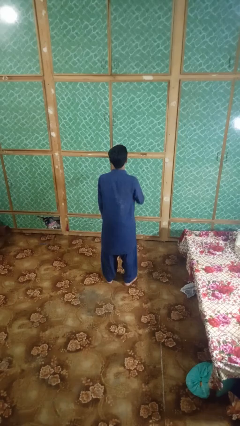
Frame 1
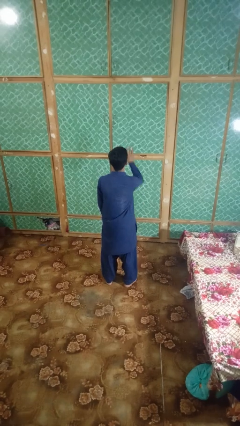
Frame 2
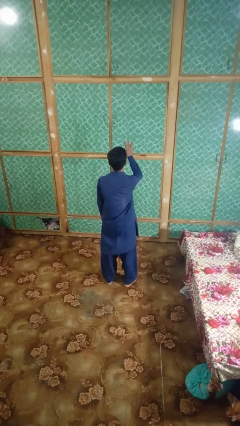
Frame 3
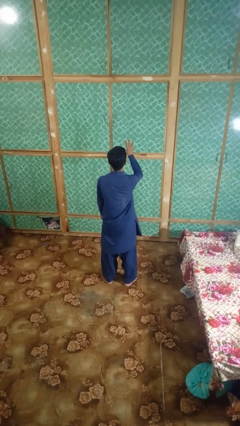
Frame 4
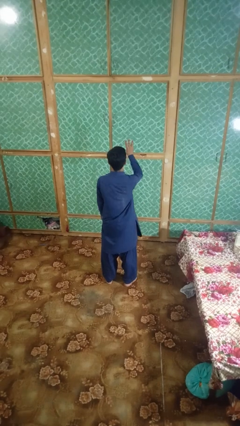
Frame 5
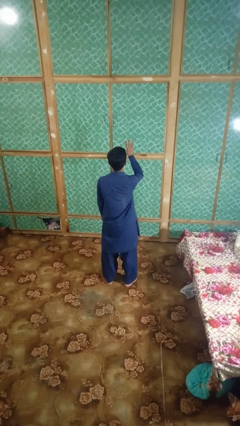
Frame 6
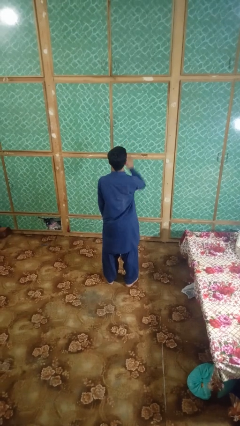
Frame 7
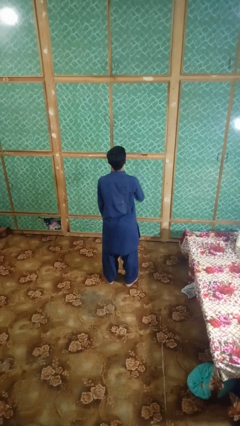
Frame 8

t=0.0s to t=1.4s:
person gestures number three

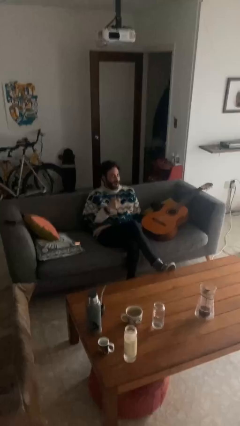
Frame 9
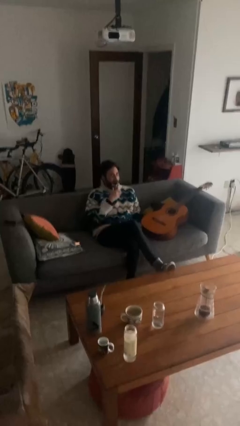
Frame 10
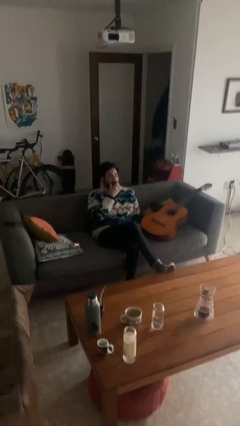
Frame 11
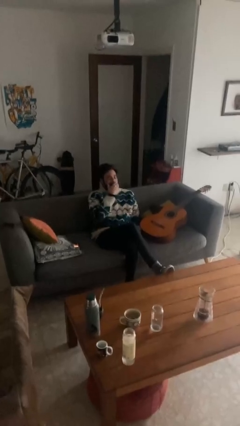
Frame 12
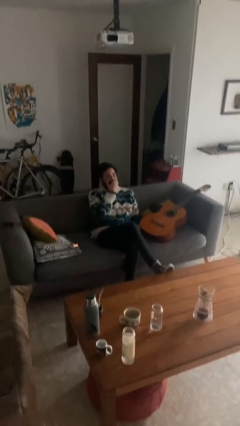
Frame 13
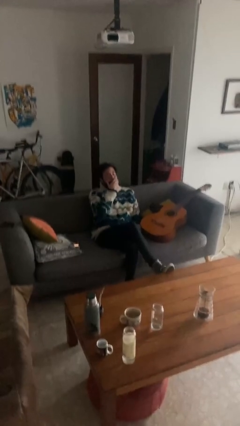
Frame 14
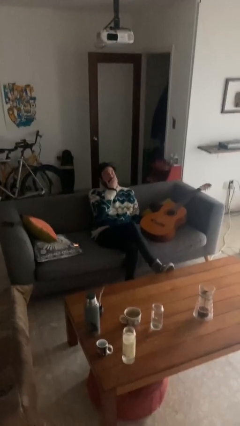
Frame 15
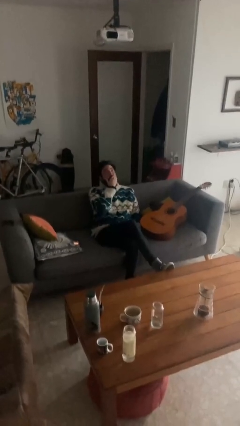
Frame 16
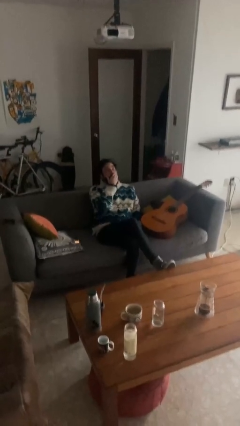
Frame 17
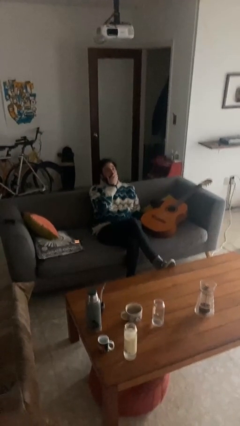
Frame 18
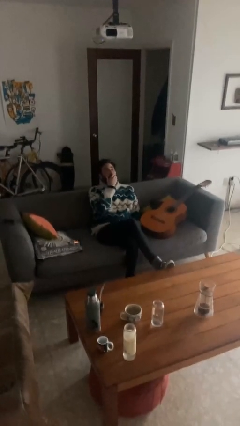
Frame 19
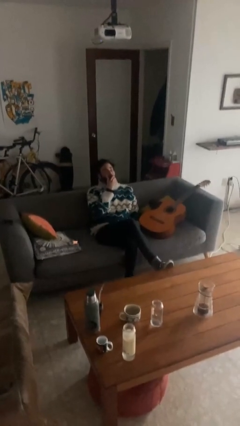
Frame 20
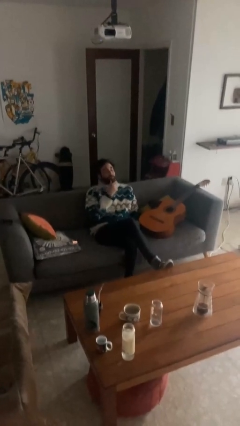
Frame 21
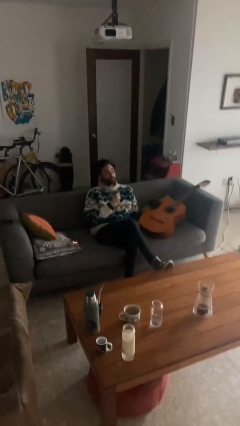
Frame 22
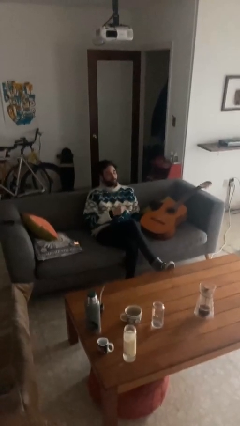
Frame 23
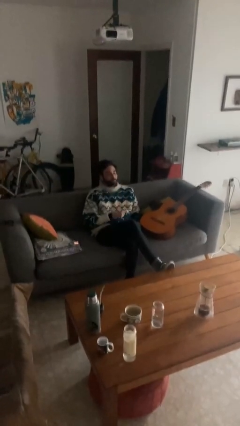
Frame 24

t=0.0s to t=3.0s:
person yawns

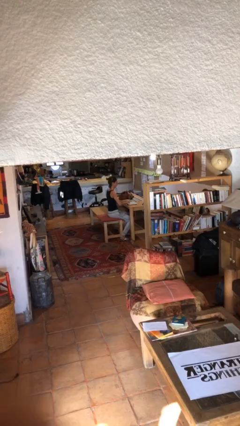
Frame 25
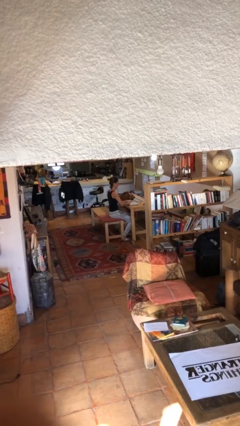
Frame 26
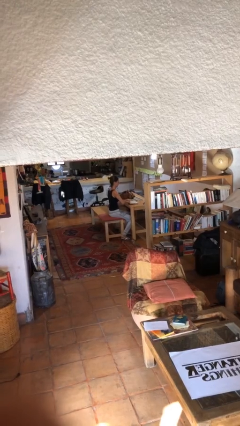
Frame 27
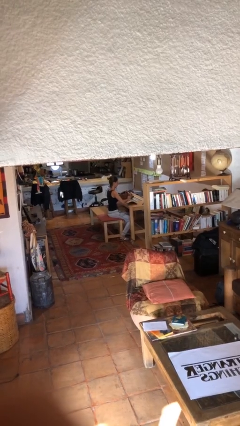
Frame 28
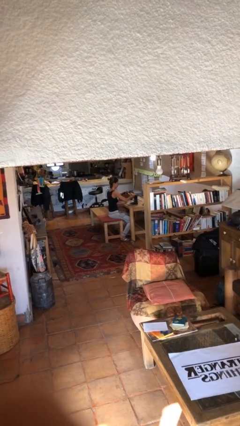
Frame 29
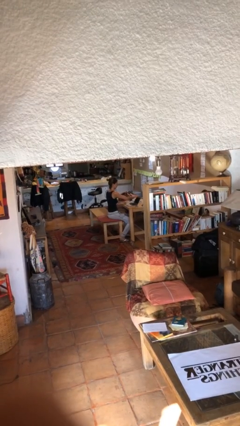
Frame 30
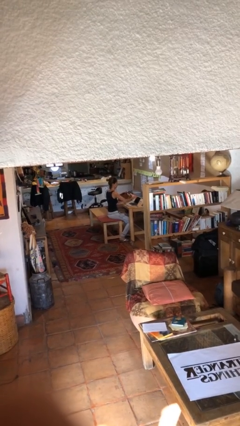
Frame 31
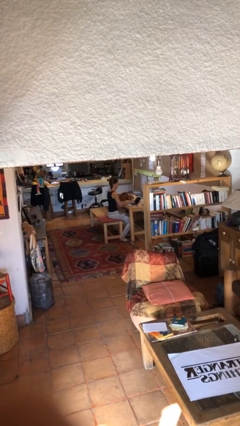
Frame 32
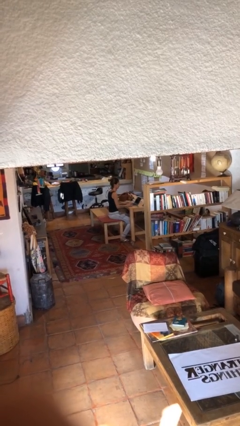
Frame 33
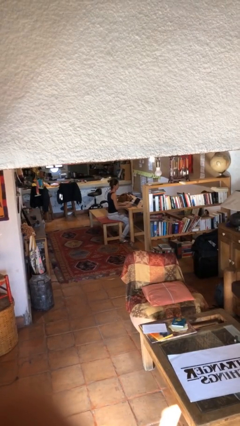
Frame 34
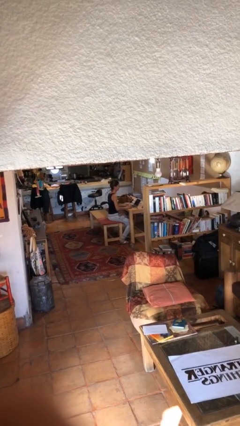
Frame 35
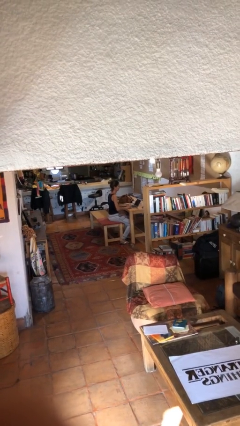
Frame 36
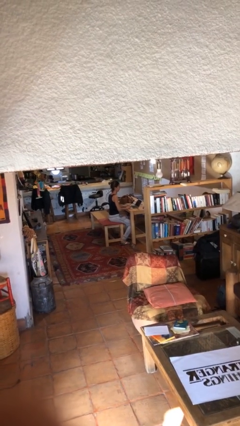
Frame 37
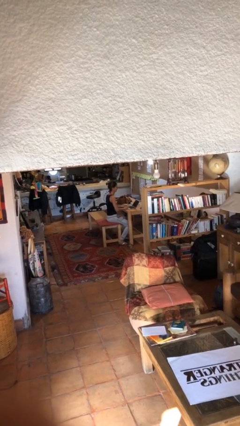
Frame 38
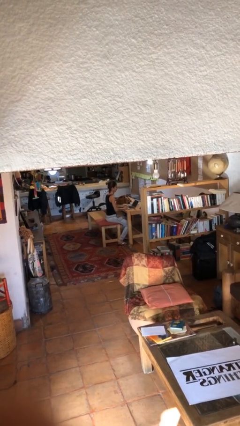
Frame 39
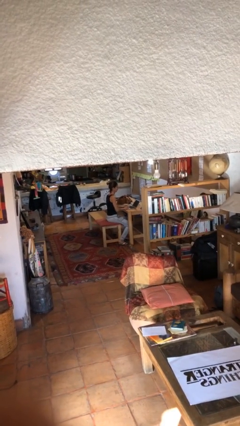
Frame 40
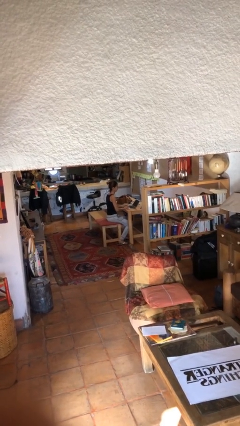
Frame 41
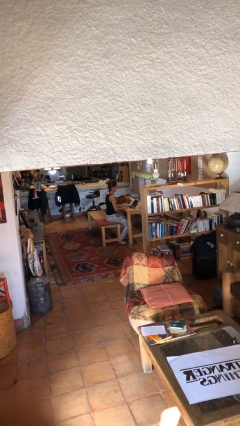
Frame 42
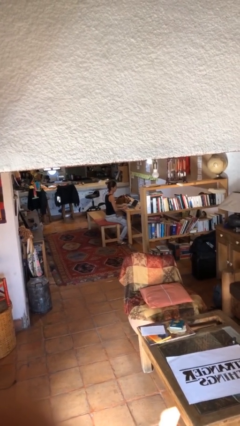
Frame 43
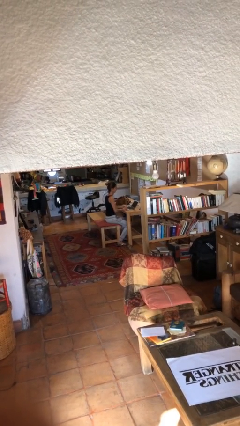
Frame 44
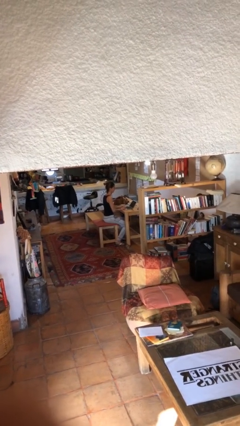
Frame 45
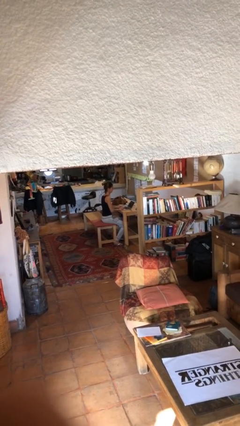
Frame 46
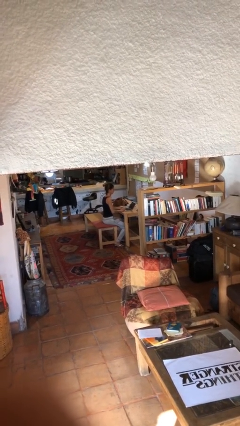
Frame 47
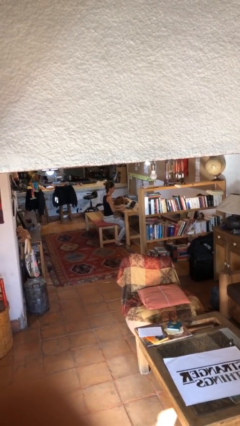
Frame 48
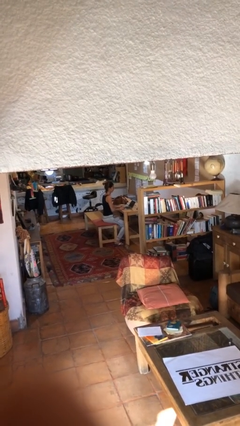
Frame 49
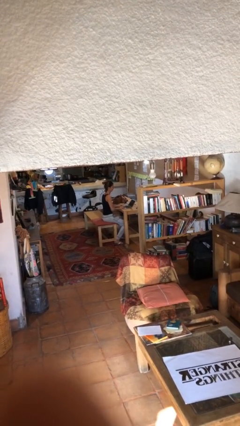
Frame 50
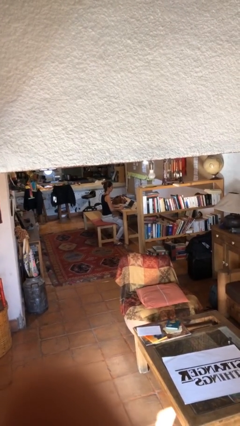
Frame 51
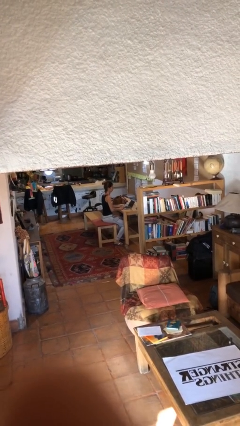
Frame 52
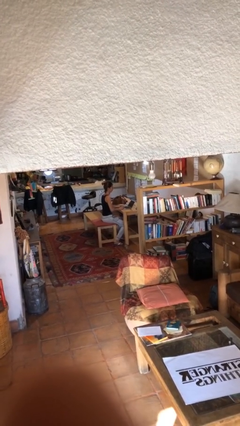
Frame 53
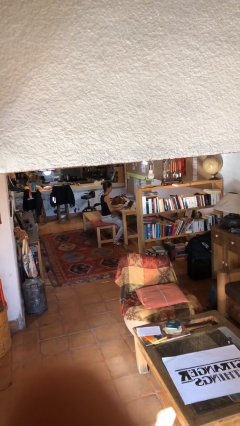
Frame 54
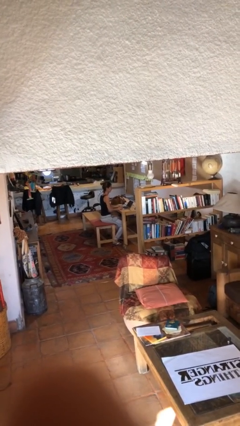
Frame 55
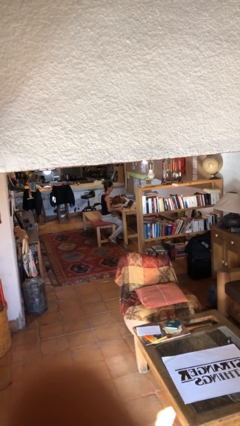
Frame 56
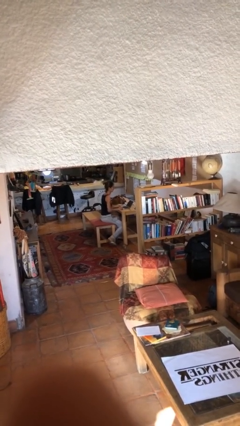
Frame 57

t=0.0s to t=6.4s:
person interacts with laptop

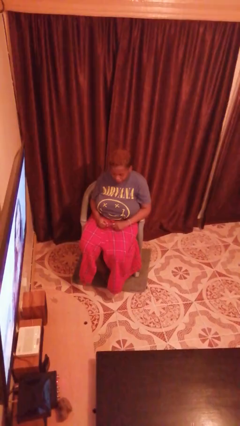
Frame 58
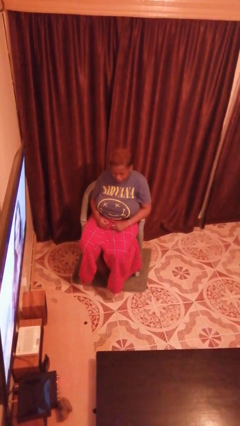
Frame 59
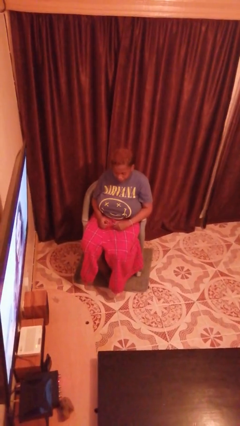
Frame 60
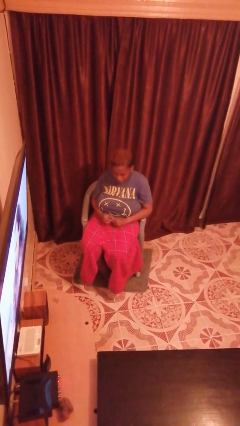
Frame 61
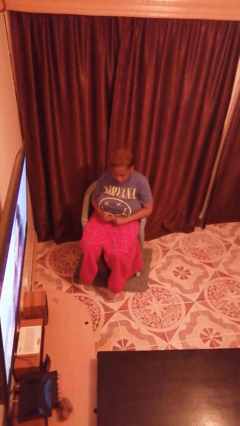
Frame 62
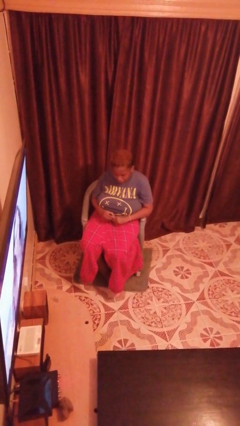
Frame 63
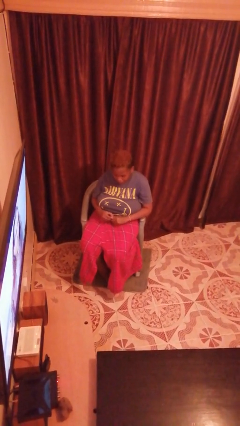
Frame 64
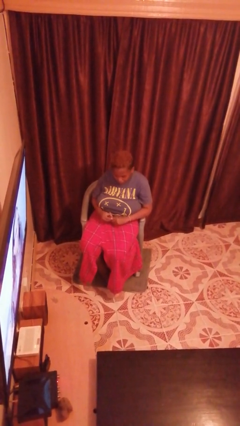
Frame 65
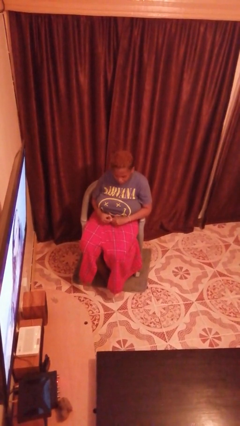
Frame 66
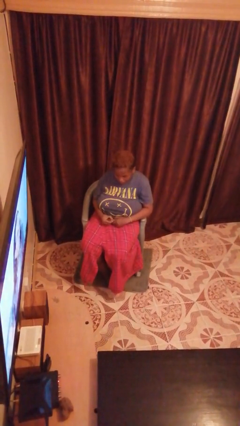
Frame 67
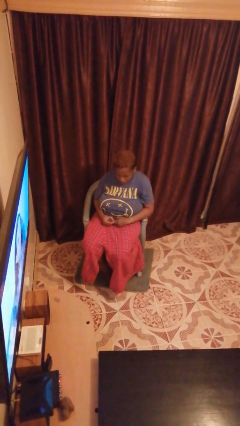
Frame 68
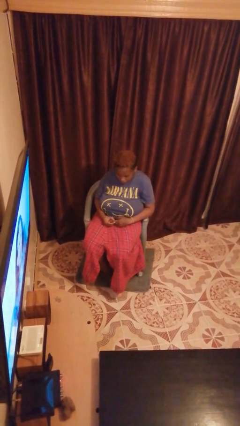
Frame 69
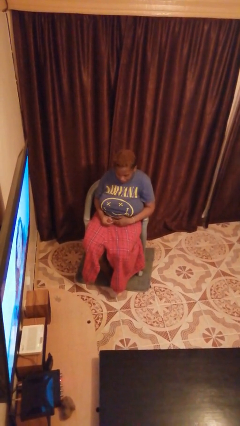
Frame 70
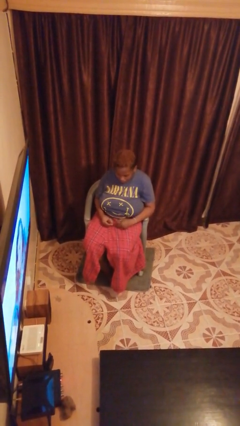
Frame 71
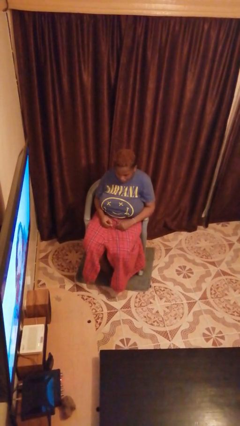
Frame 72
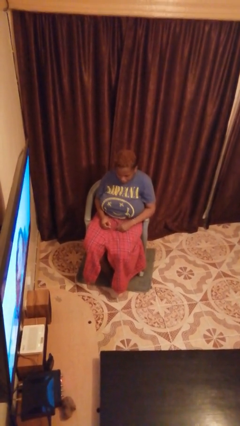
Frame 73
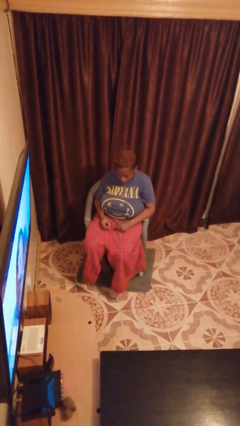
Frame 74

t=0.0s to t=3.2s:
person takes off ring

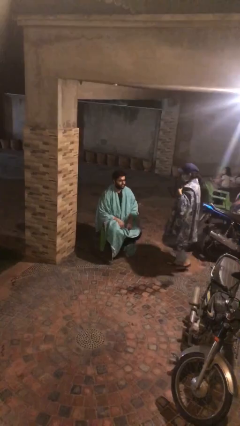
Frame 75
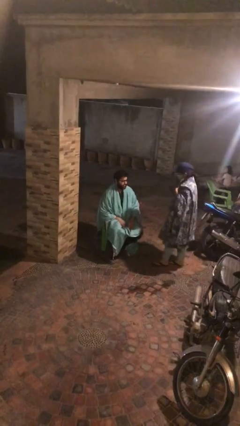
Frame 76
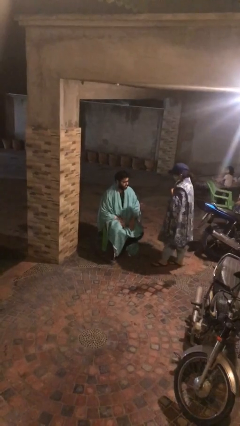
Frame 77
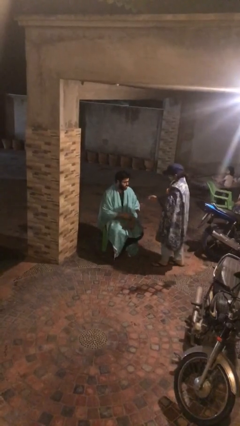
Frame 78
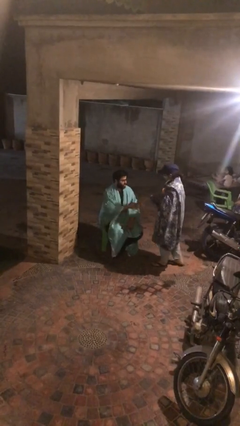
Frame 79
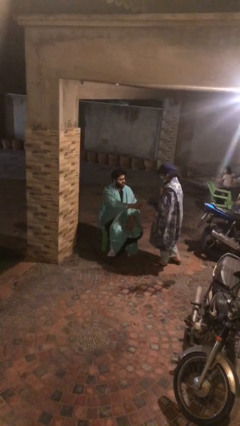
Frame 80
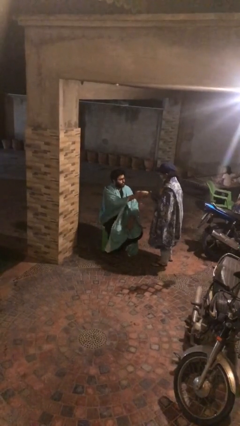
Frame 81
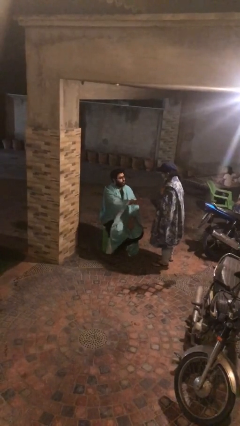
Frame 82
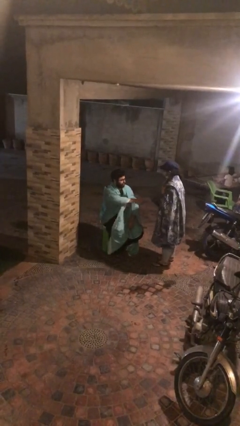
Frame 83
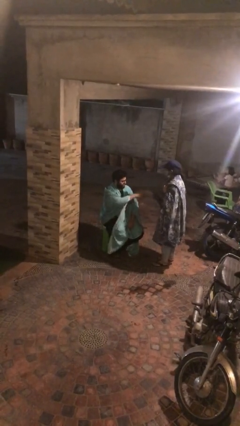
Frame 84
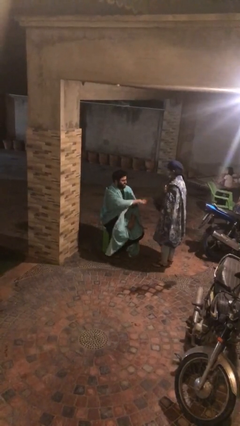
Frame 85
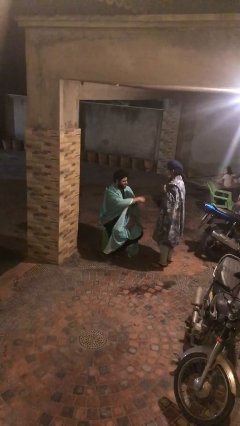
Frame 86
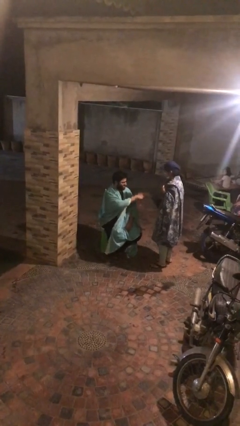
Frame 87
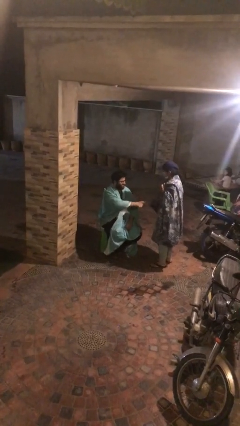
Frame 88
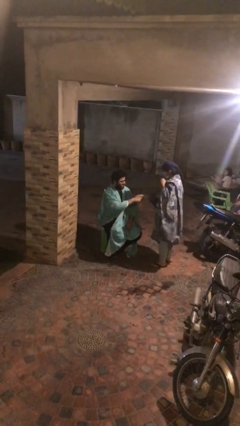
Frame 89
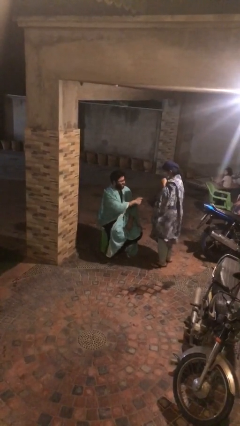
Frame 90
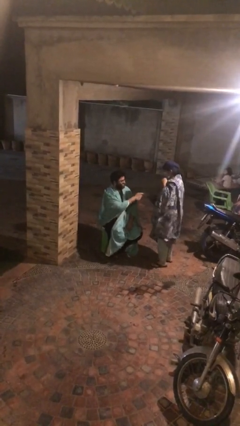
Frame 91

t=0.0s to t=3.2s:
person shakes hand

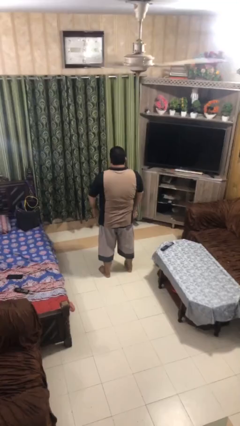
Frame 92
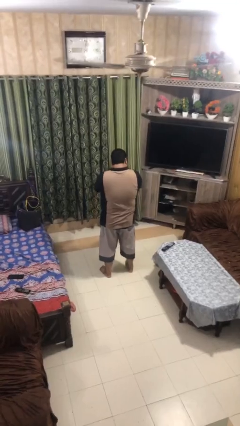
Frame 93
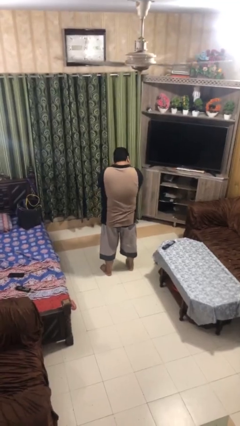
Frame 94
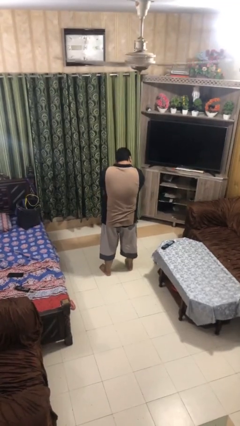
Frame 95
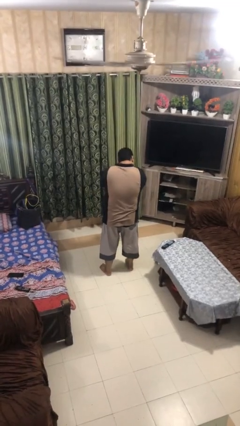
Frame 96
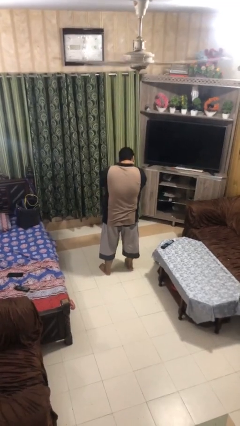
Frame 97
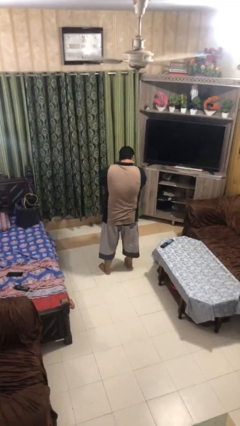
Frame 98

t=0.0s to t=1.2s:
person swats bug
